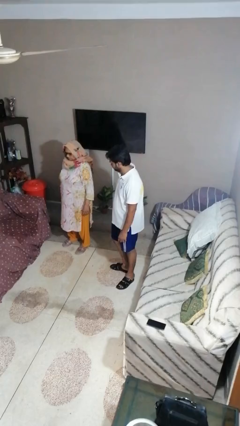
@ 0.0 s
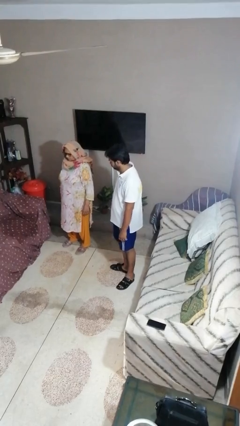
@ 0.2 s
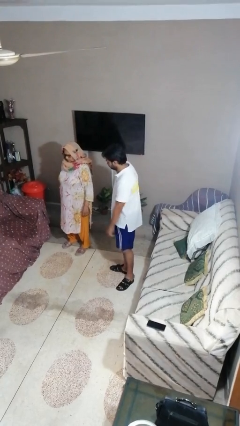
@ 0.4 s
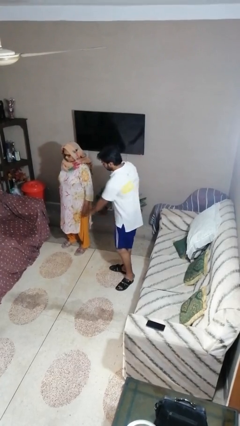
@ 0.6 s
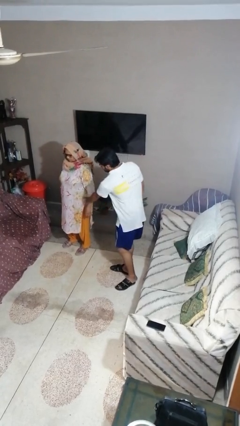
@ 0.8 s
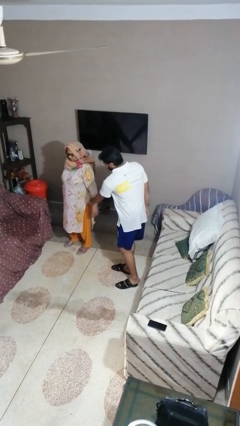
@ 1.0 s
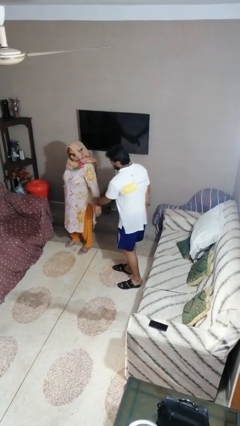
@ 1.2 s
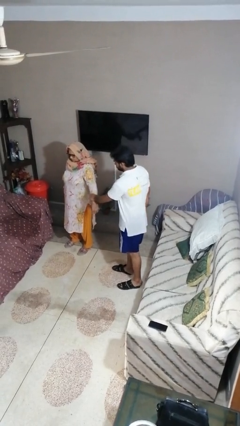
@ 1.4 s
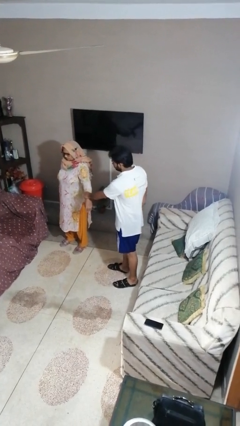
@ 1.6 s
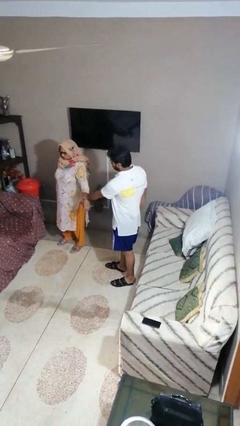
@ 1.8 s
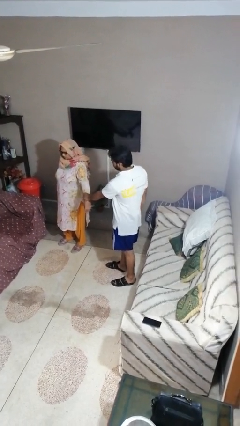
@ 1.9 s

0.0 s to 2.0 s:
person grabs person by forearm

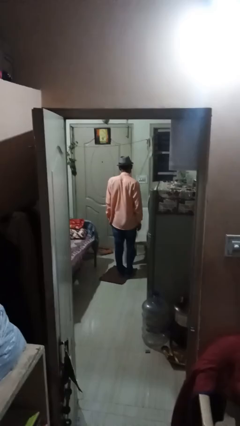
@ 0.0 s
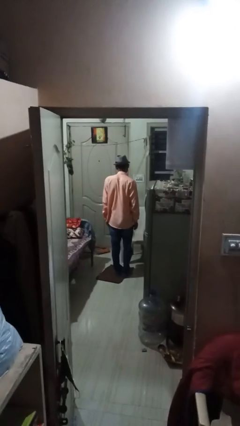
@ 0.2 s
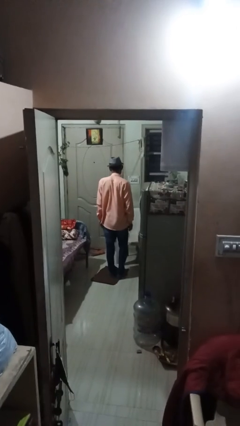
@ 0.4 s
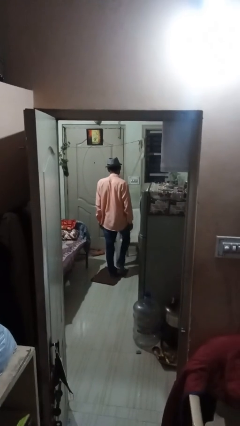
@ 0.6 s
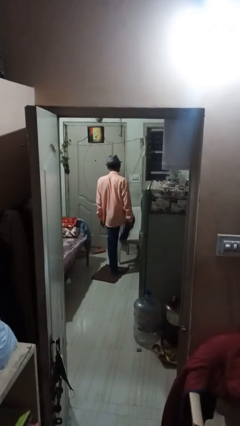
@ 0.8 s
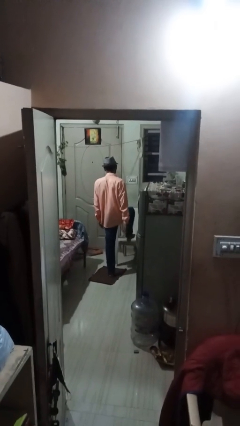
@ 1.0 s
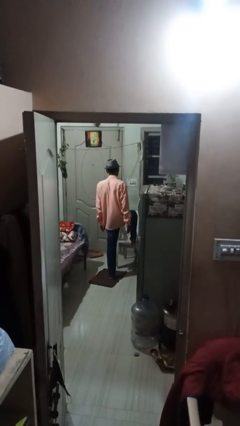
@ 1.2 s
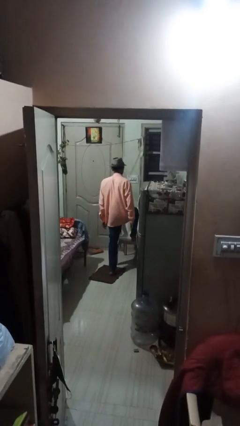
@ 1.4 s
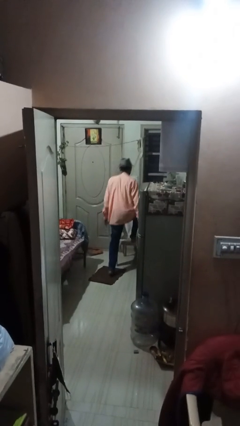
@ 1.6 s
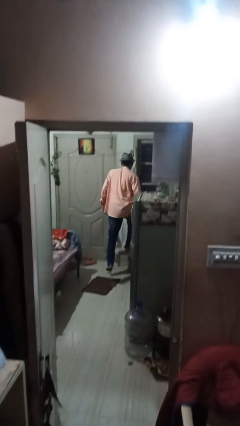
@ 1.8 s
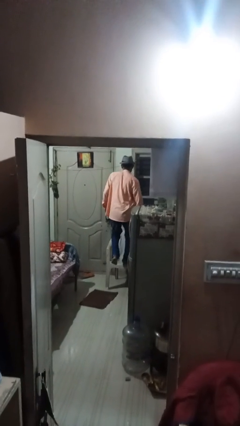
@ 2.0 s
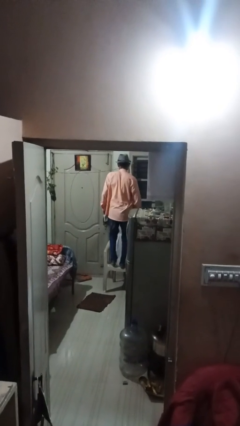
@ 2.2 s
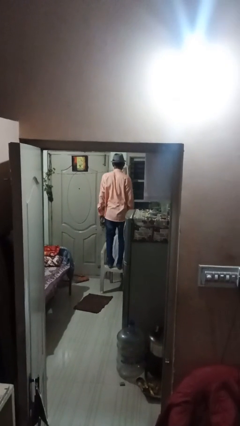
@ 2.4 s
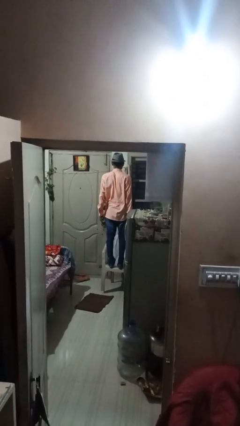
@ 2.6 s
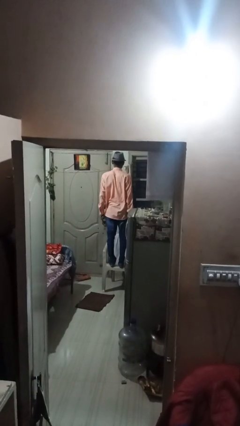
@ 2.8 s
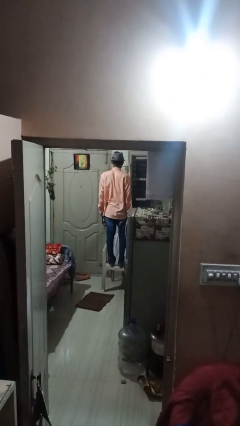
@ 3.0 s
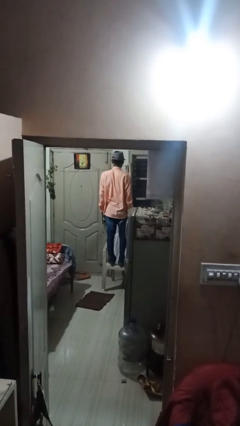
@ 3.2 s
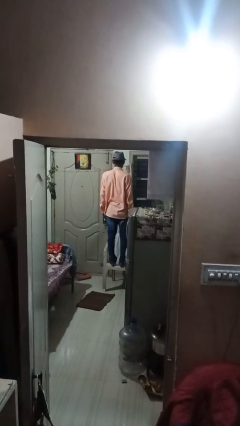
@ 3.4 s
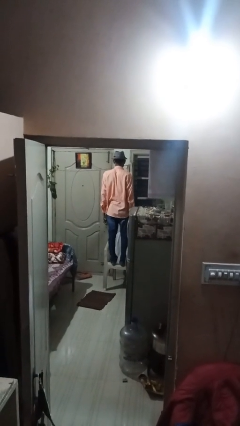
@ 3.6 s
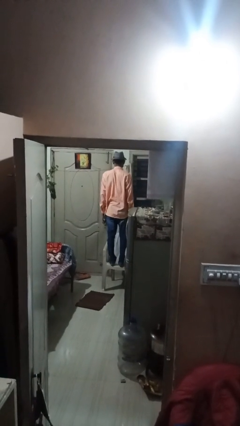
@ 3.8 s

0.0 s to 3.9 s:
person climbs on chair

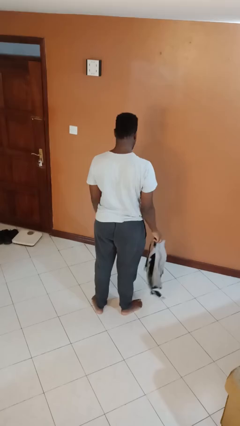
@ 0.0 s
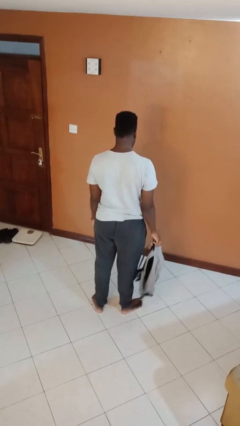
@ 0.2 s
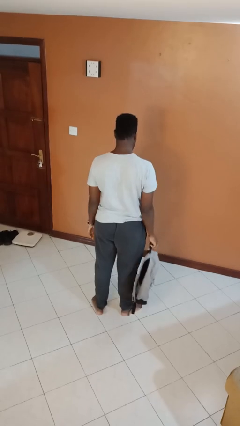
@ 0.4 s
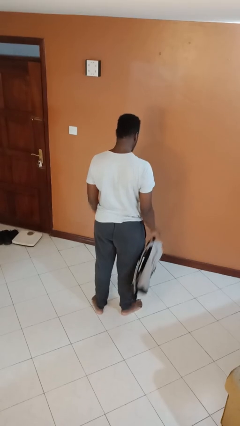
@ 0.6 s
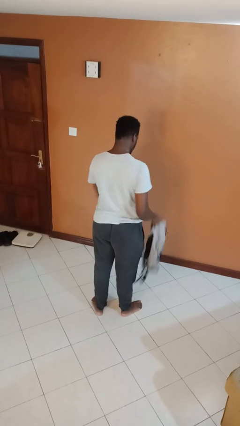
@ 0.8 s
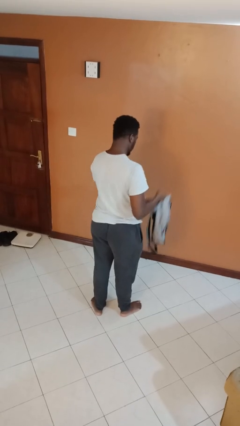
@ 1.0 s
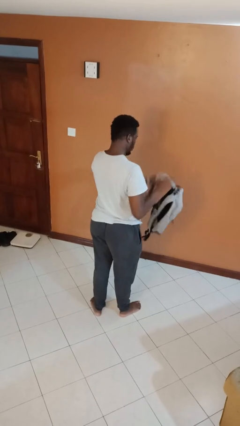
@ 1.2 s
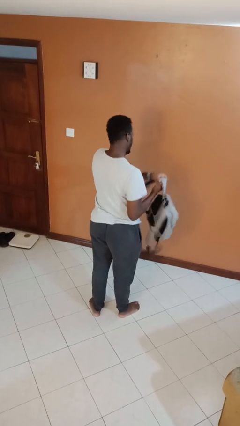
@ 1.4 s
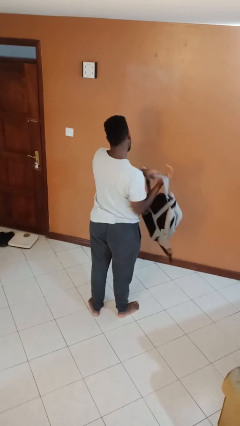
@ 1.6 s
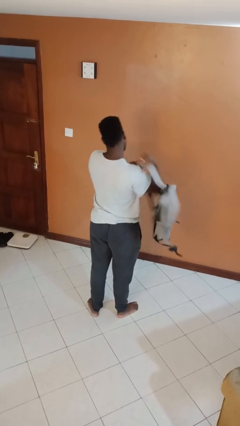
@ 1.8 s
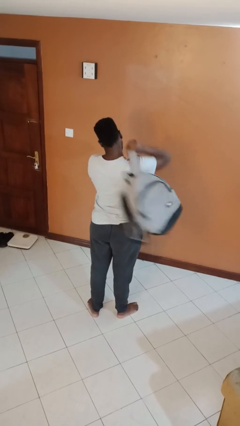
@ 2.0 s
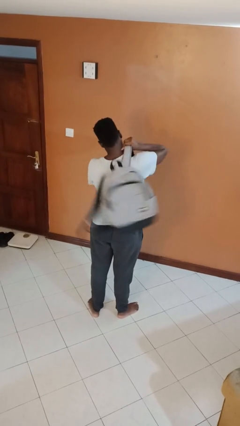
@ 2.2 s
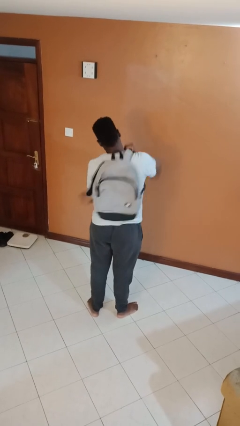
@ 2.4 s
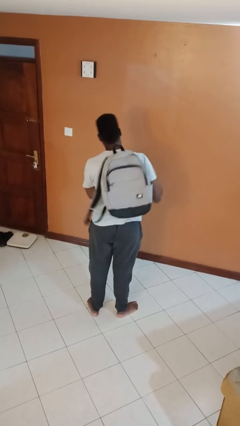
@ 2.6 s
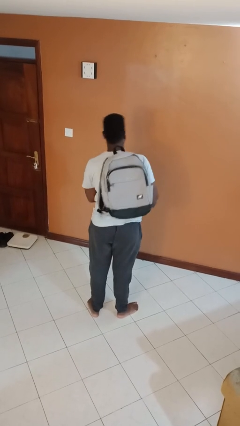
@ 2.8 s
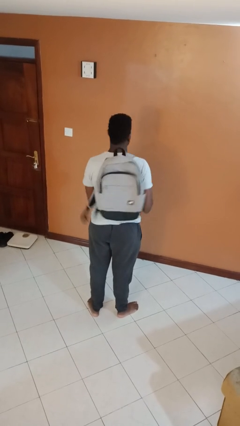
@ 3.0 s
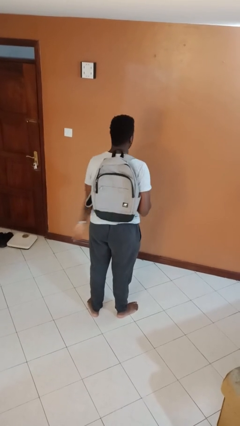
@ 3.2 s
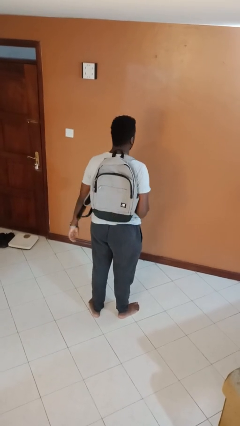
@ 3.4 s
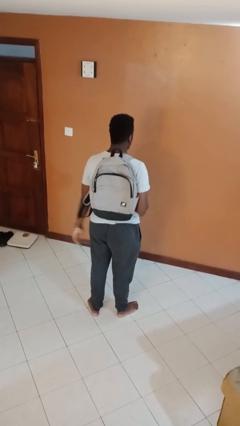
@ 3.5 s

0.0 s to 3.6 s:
person puts on backpack

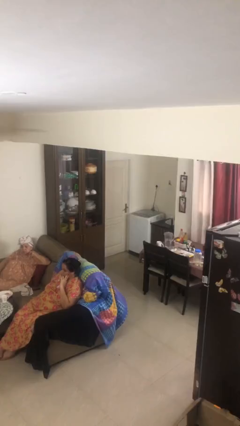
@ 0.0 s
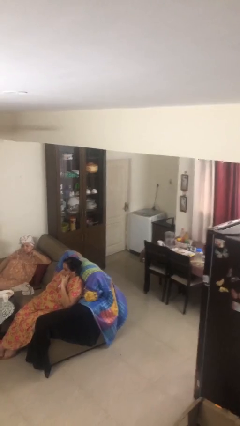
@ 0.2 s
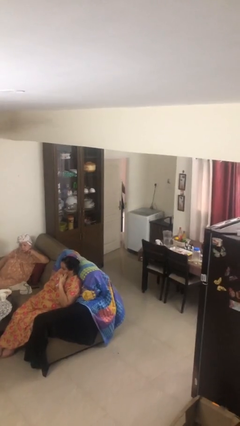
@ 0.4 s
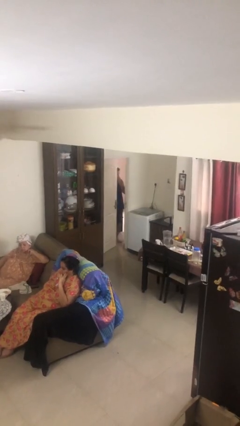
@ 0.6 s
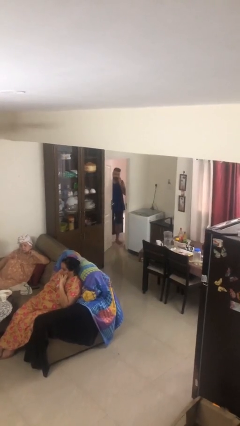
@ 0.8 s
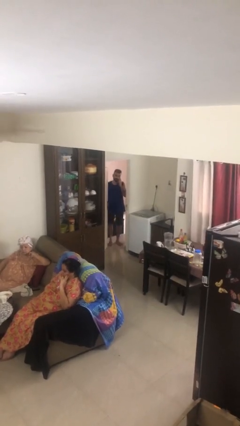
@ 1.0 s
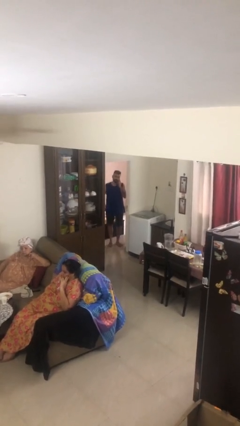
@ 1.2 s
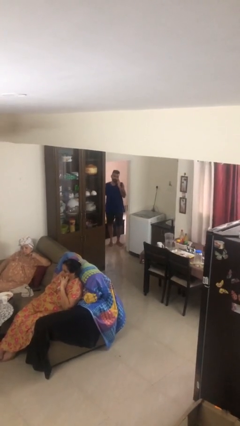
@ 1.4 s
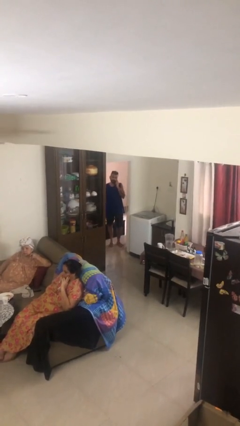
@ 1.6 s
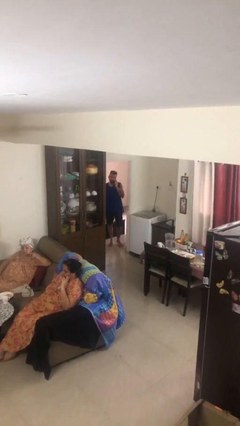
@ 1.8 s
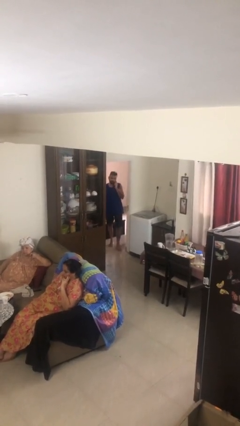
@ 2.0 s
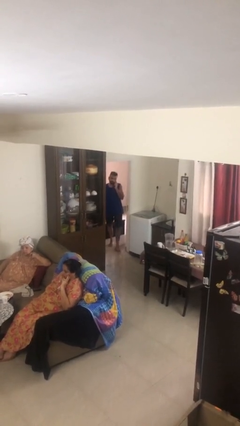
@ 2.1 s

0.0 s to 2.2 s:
person opens facility door

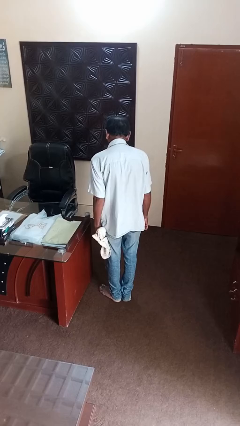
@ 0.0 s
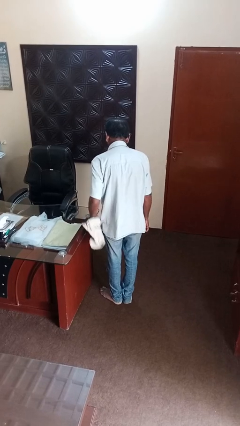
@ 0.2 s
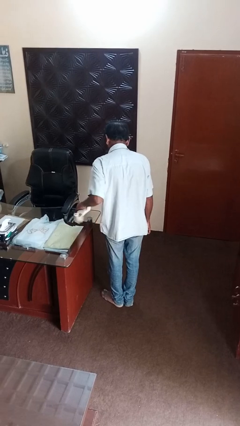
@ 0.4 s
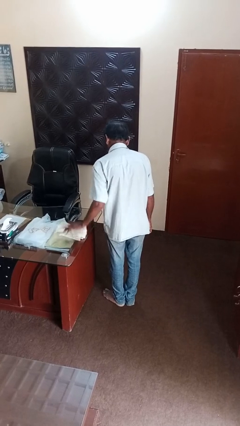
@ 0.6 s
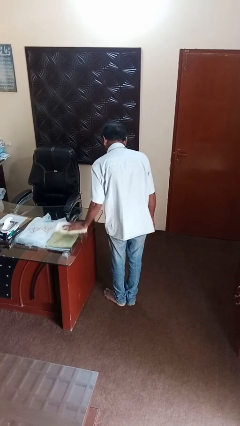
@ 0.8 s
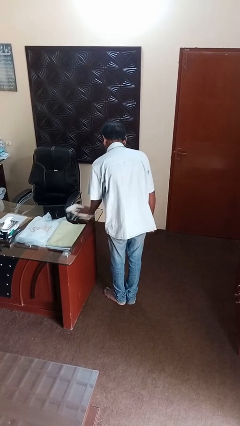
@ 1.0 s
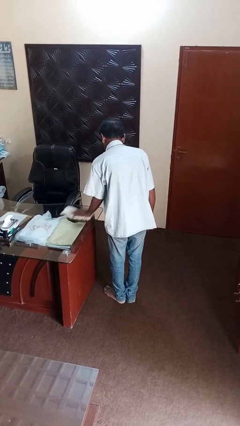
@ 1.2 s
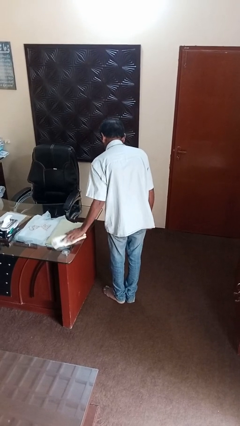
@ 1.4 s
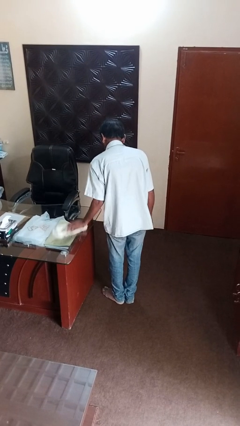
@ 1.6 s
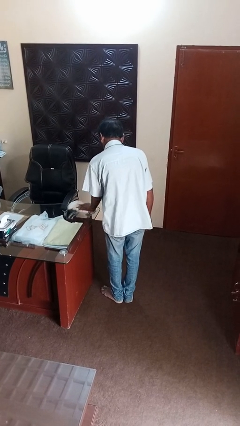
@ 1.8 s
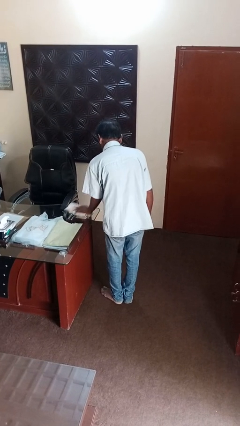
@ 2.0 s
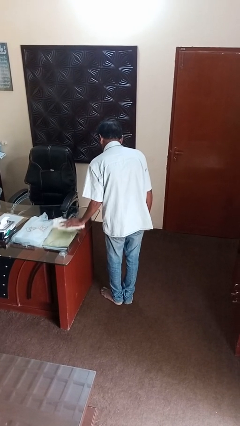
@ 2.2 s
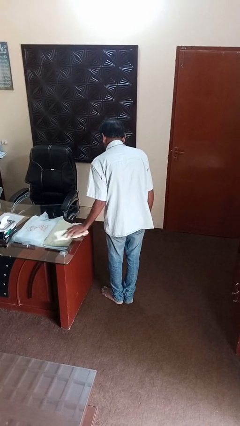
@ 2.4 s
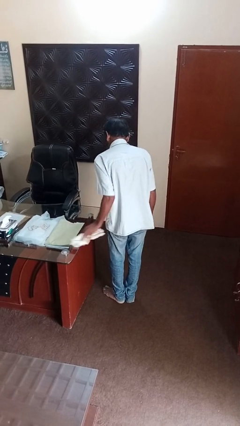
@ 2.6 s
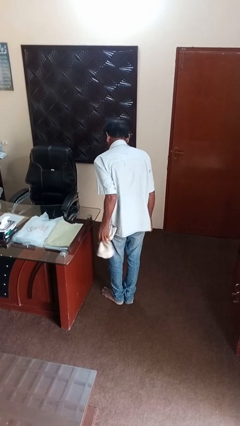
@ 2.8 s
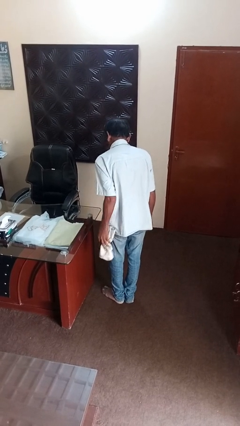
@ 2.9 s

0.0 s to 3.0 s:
person cleans table with rag

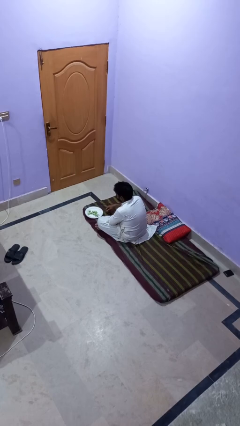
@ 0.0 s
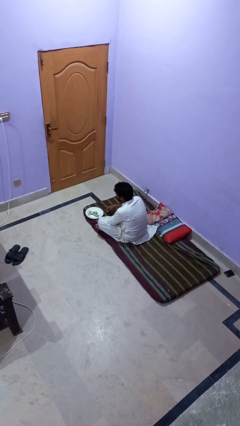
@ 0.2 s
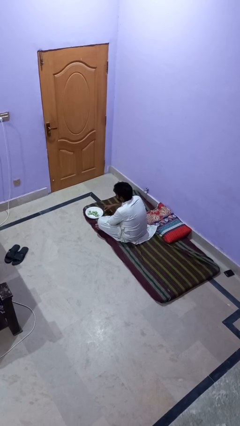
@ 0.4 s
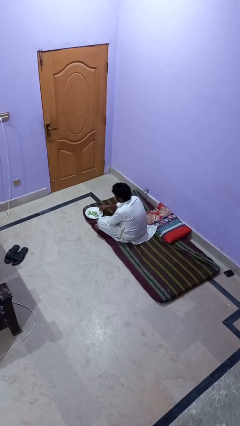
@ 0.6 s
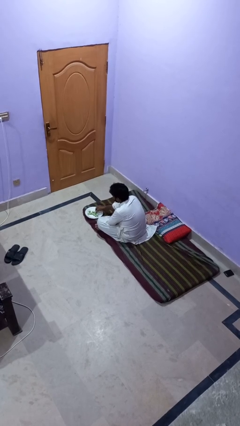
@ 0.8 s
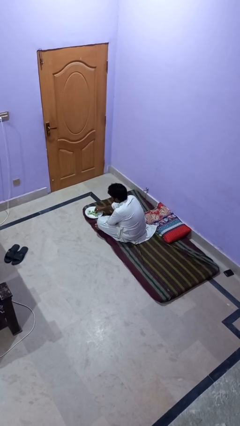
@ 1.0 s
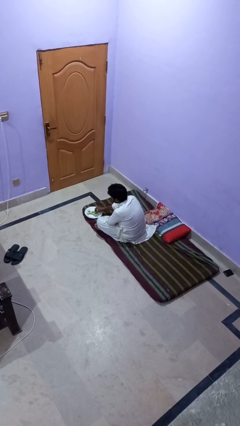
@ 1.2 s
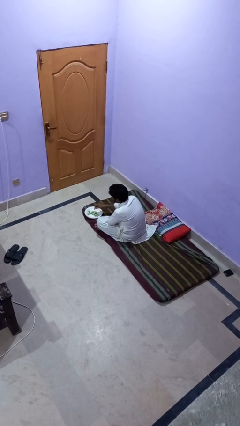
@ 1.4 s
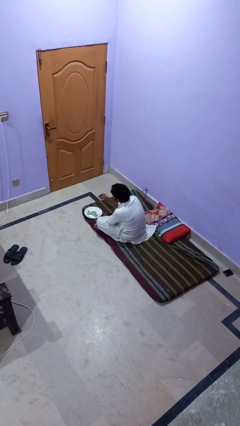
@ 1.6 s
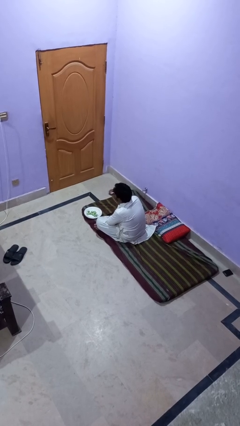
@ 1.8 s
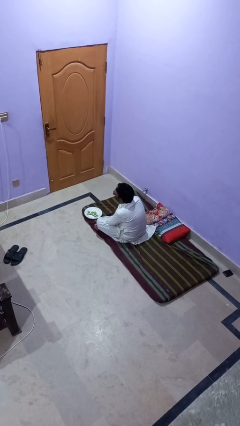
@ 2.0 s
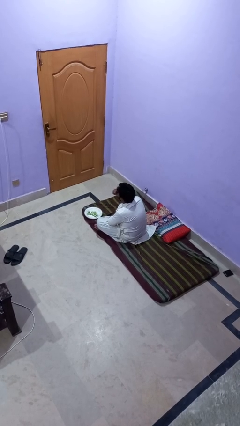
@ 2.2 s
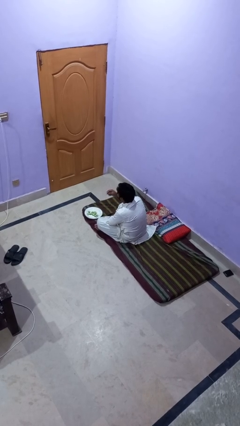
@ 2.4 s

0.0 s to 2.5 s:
person eats with hands

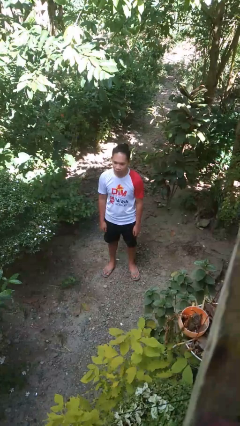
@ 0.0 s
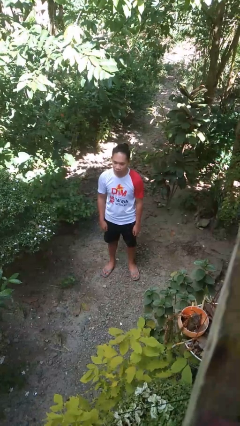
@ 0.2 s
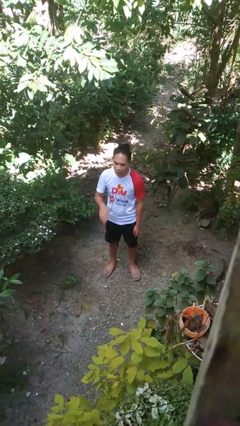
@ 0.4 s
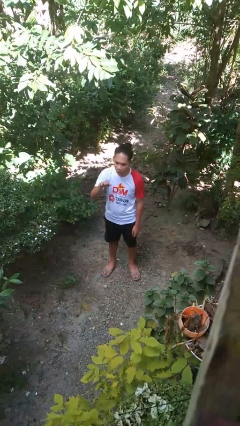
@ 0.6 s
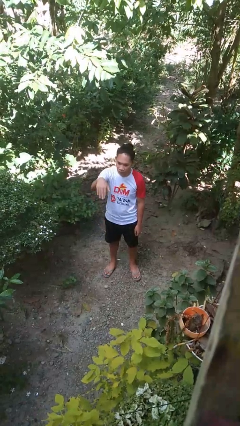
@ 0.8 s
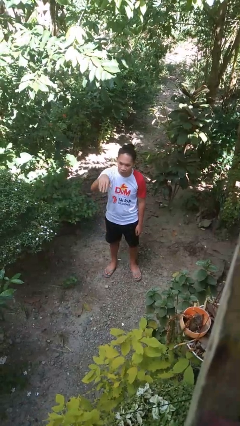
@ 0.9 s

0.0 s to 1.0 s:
person gestures come here
